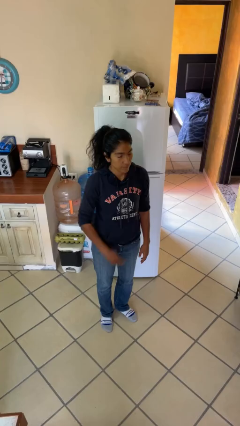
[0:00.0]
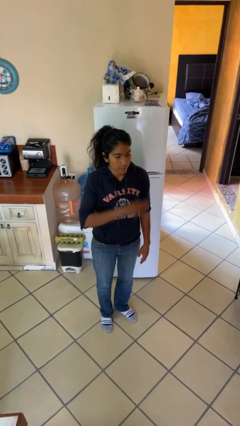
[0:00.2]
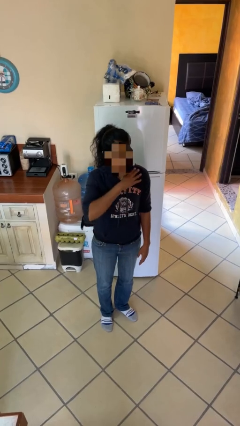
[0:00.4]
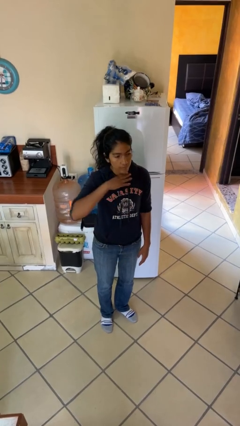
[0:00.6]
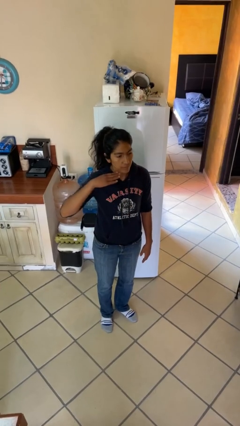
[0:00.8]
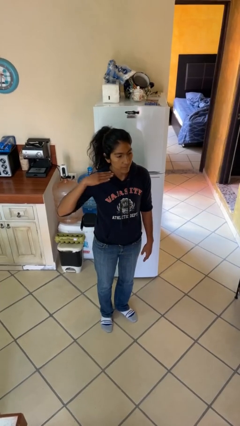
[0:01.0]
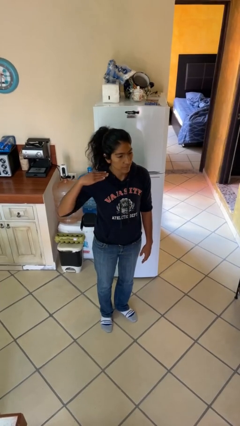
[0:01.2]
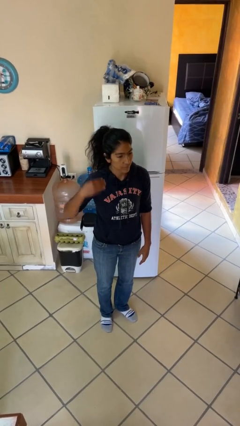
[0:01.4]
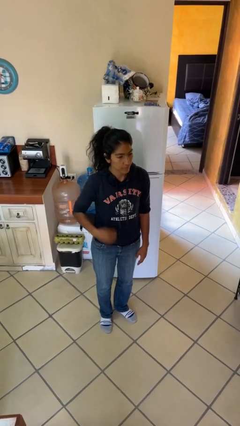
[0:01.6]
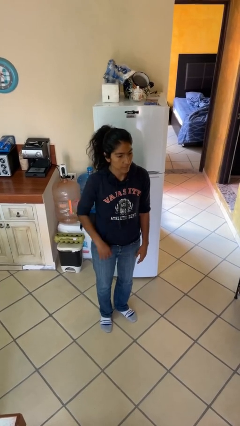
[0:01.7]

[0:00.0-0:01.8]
person gestures cut

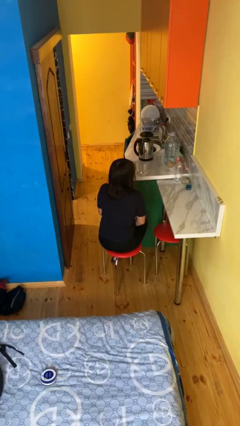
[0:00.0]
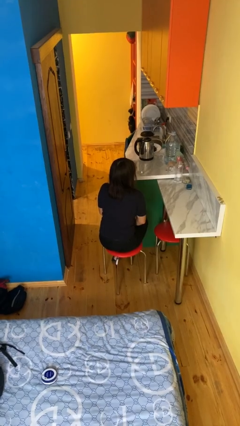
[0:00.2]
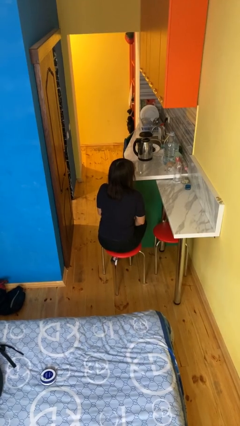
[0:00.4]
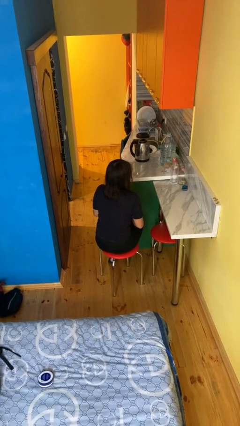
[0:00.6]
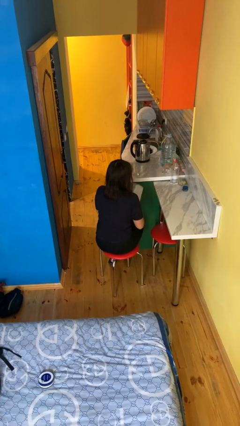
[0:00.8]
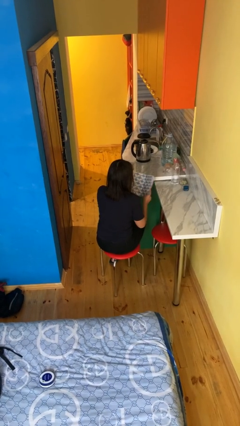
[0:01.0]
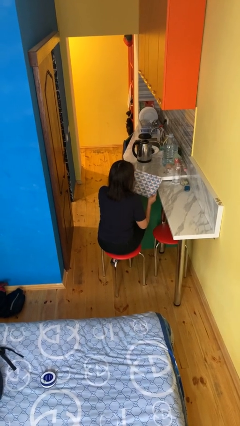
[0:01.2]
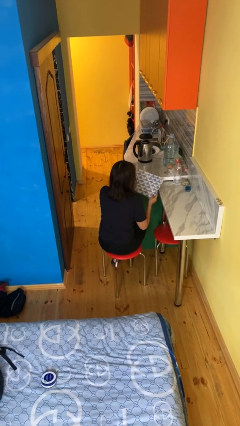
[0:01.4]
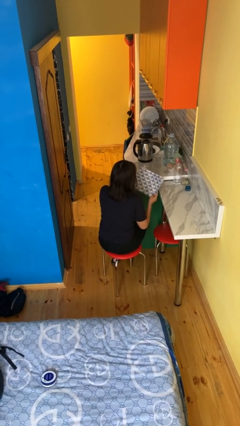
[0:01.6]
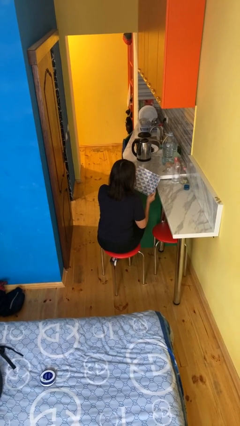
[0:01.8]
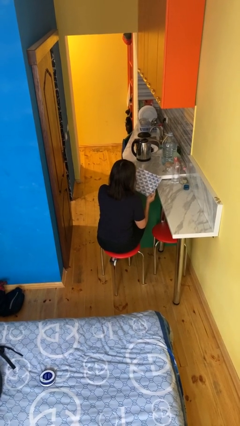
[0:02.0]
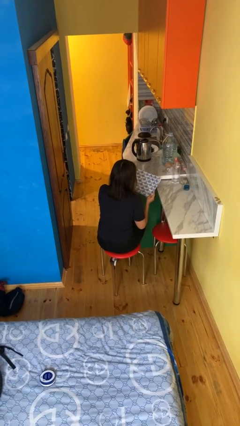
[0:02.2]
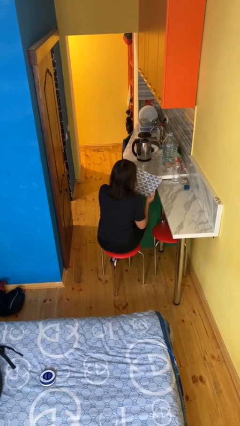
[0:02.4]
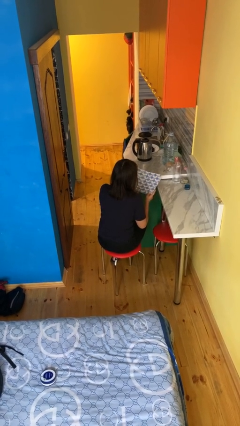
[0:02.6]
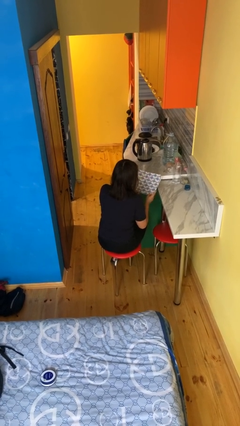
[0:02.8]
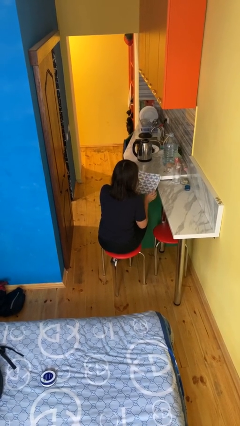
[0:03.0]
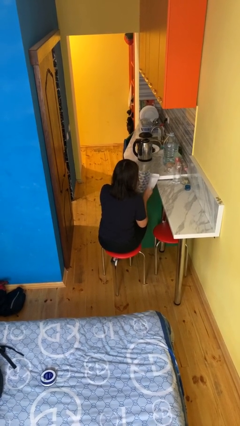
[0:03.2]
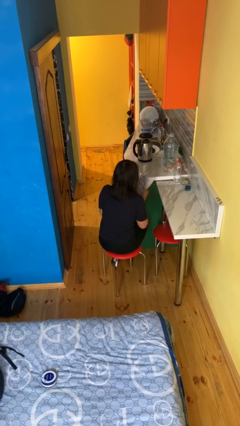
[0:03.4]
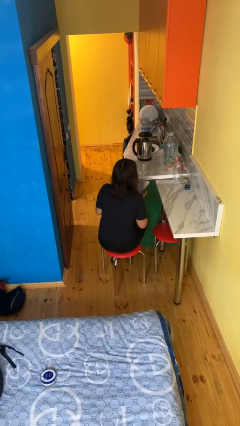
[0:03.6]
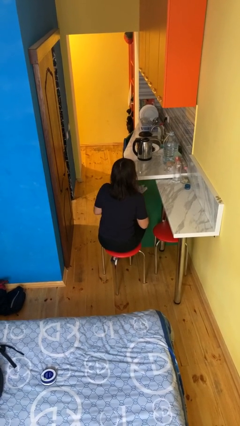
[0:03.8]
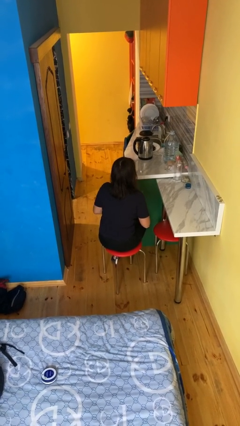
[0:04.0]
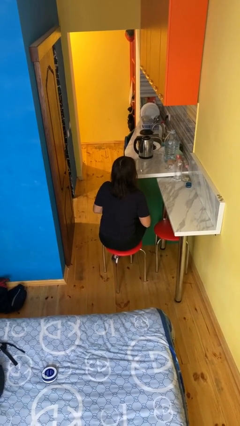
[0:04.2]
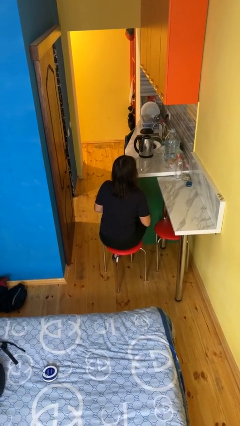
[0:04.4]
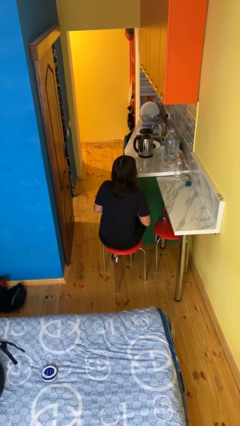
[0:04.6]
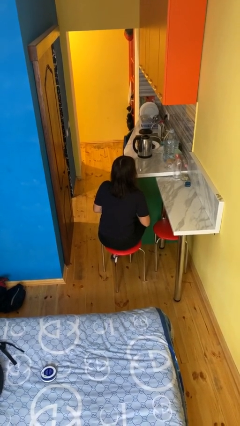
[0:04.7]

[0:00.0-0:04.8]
person reads magazine

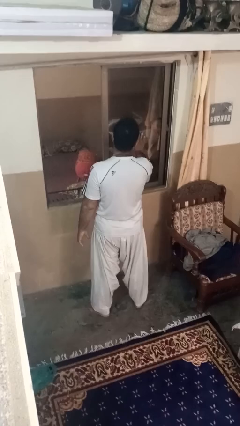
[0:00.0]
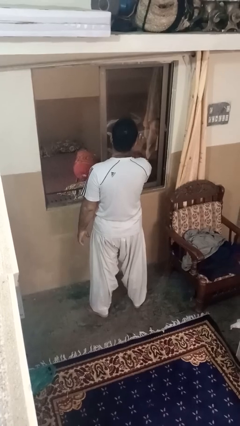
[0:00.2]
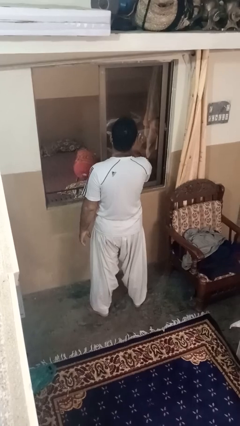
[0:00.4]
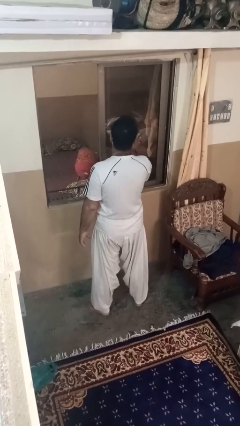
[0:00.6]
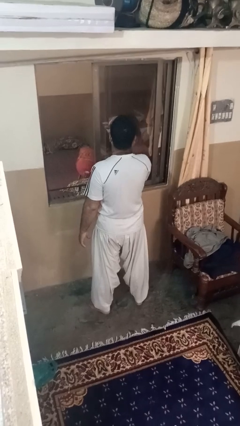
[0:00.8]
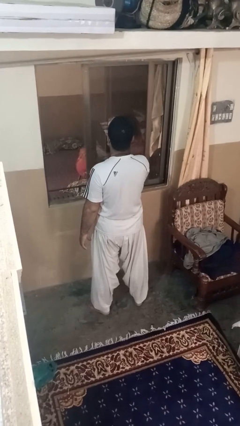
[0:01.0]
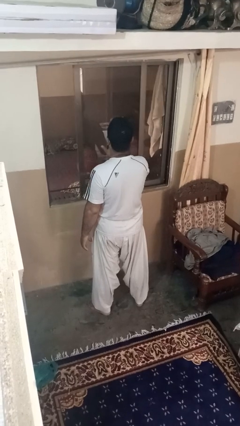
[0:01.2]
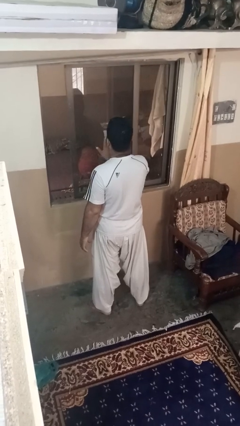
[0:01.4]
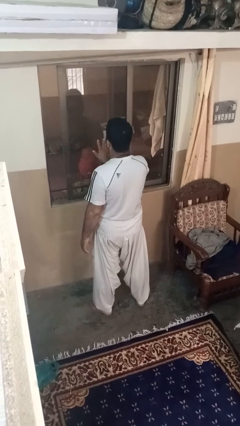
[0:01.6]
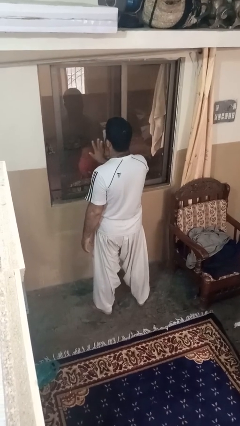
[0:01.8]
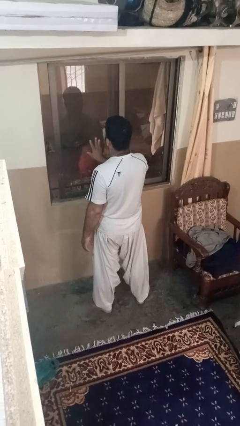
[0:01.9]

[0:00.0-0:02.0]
person closes home window

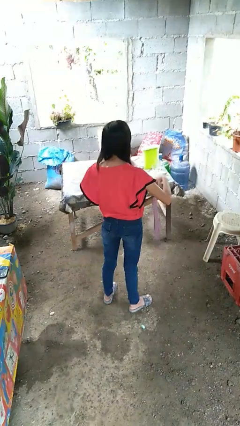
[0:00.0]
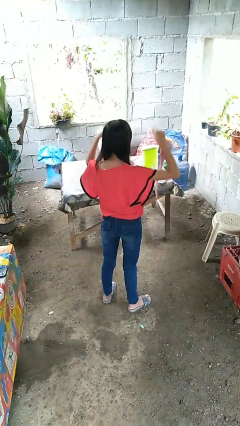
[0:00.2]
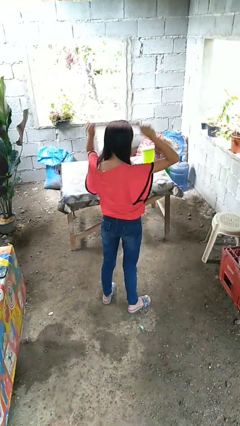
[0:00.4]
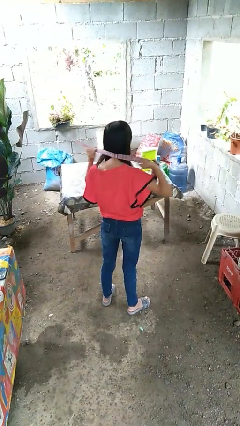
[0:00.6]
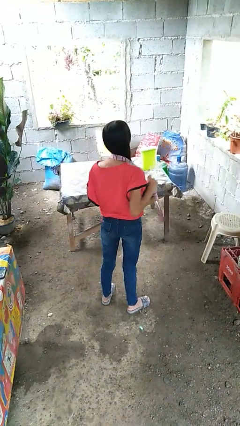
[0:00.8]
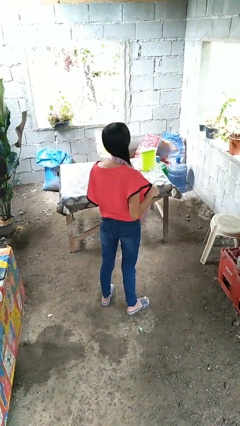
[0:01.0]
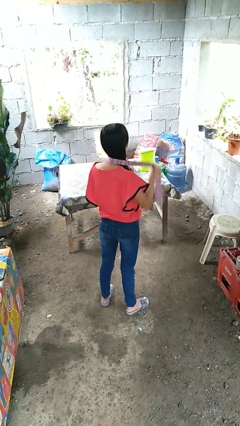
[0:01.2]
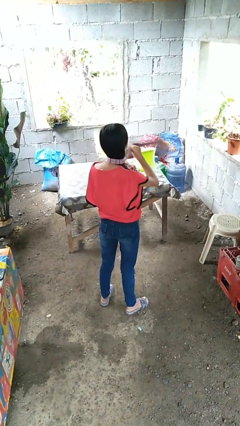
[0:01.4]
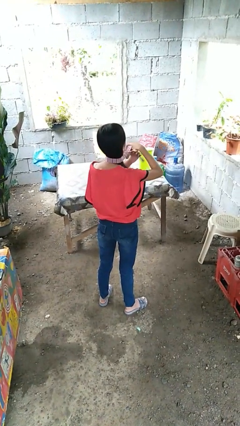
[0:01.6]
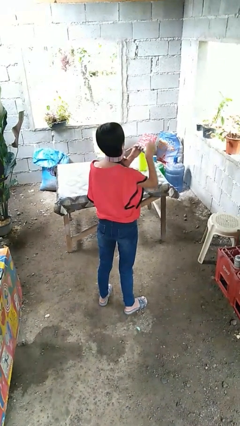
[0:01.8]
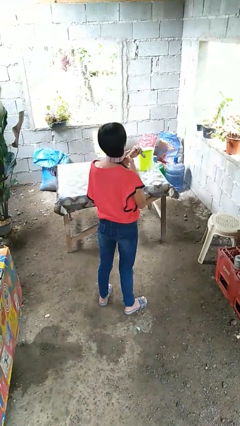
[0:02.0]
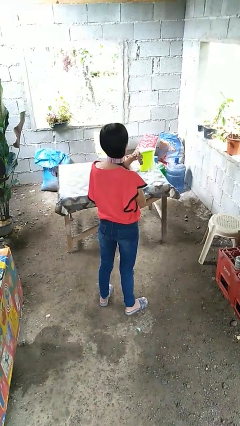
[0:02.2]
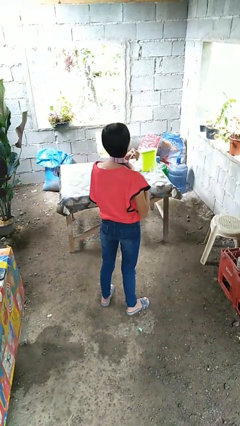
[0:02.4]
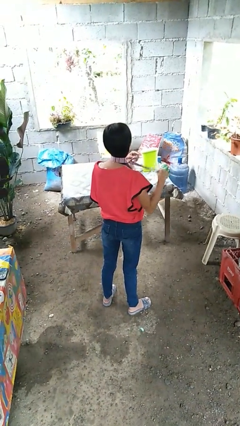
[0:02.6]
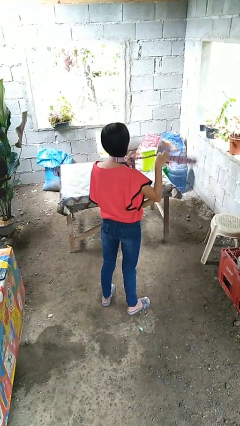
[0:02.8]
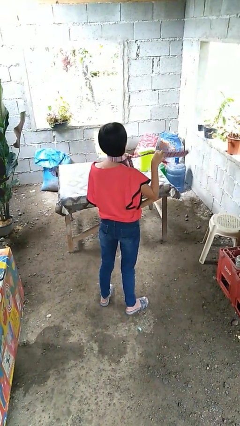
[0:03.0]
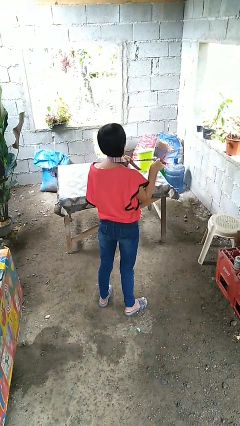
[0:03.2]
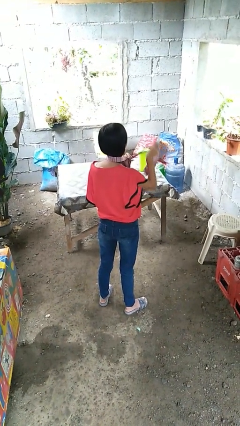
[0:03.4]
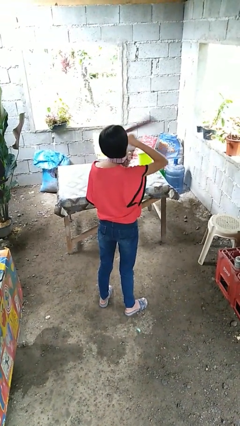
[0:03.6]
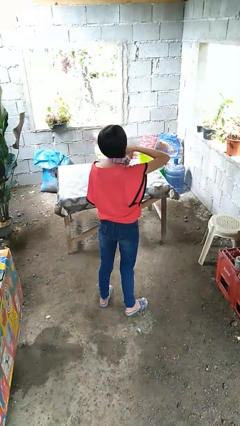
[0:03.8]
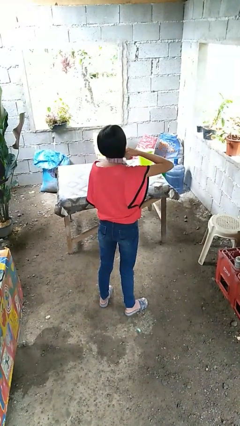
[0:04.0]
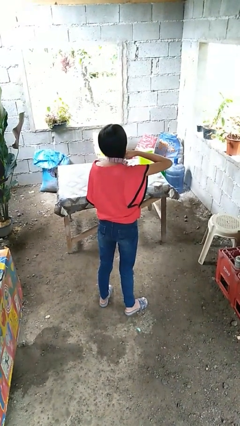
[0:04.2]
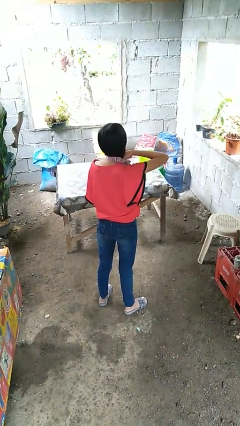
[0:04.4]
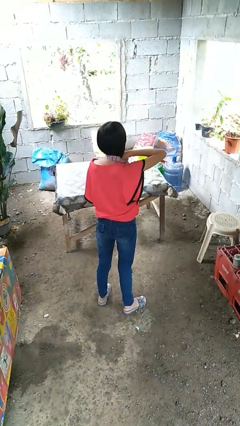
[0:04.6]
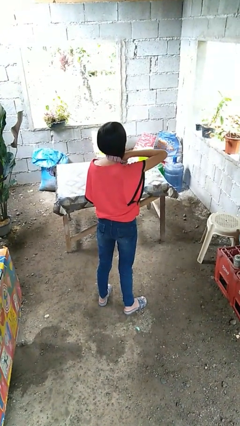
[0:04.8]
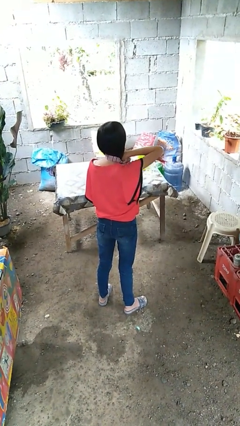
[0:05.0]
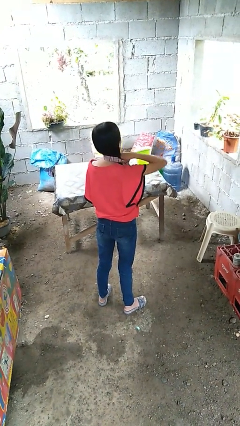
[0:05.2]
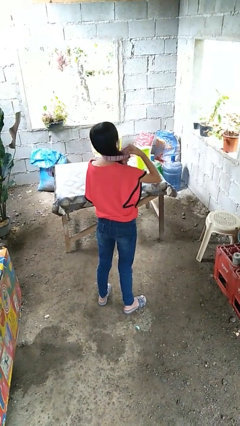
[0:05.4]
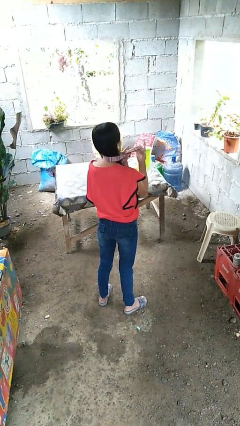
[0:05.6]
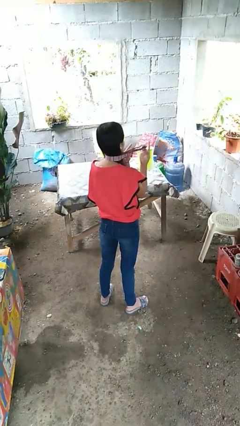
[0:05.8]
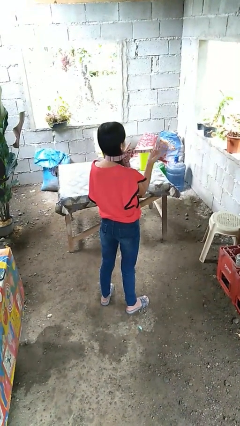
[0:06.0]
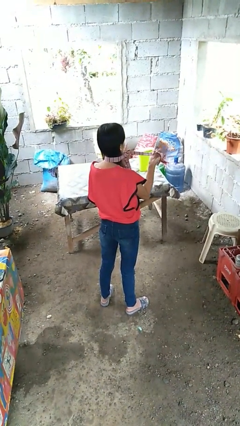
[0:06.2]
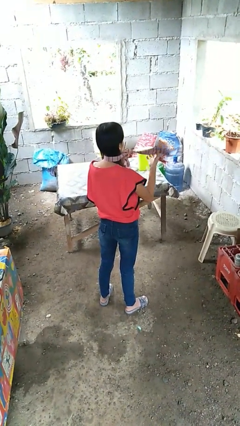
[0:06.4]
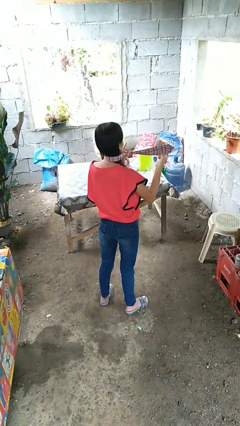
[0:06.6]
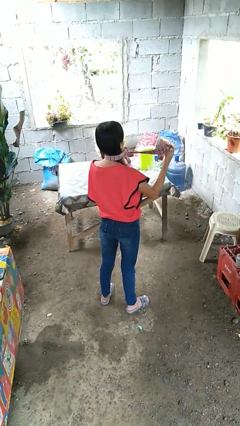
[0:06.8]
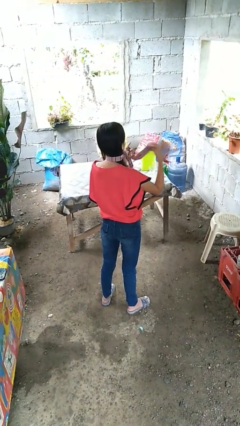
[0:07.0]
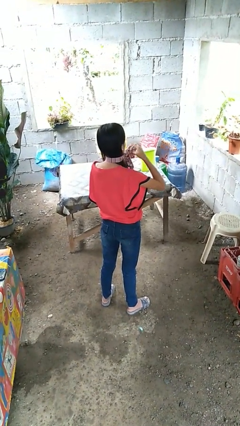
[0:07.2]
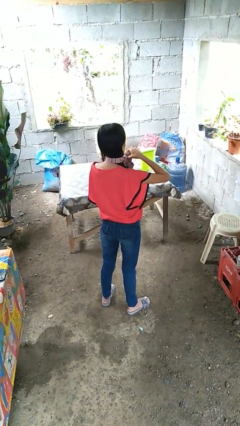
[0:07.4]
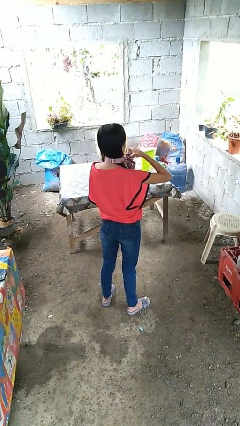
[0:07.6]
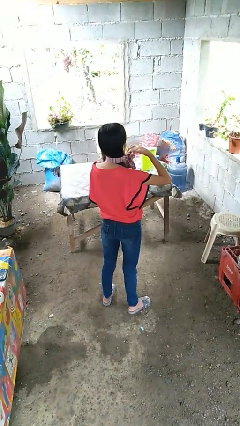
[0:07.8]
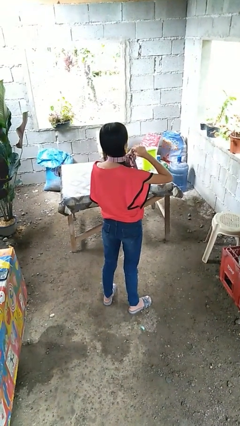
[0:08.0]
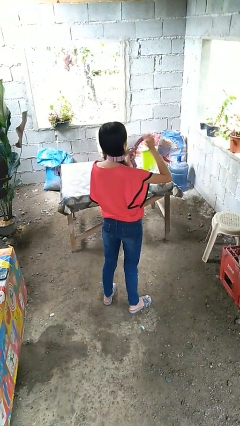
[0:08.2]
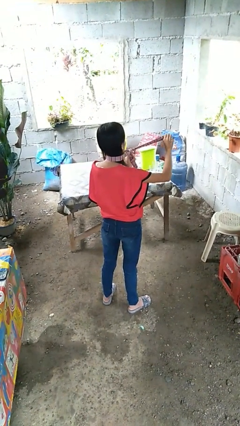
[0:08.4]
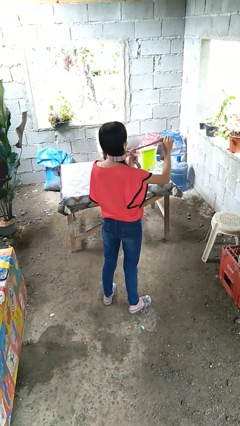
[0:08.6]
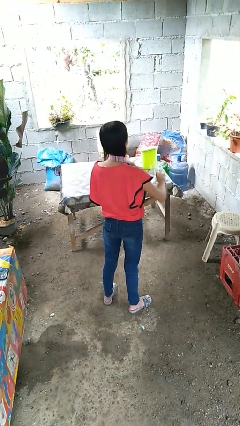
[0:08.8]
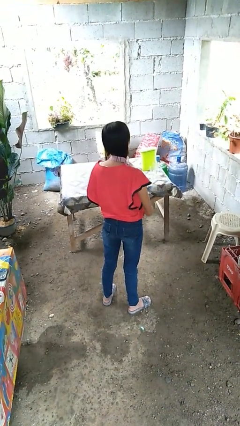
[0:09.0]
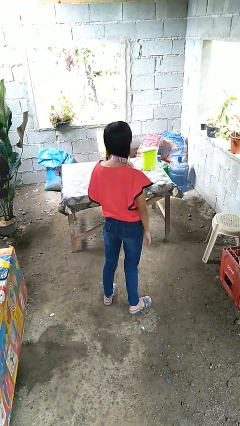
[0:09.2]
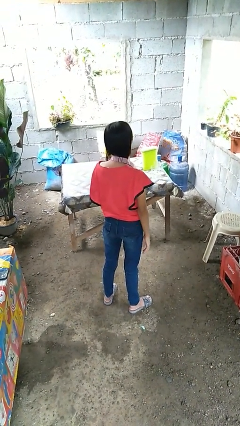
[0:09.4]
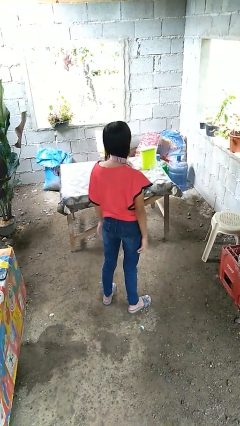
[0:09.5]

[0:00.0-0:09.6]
person puts on necktie
